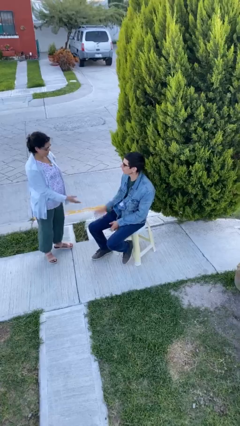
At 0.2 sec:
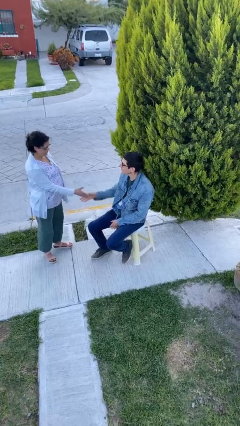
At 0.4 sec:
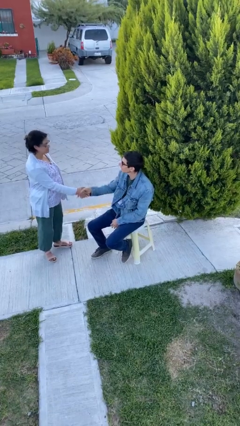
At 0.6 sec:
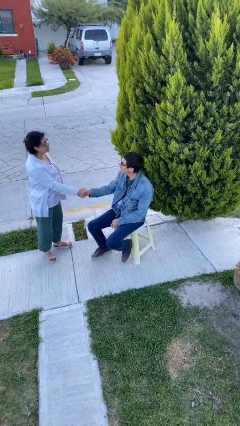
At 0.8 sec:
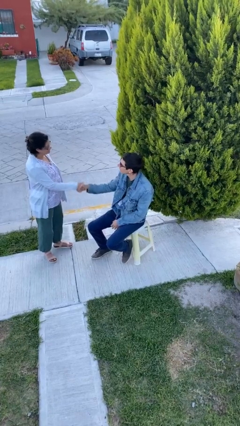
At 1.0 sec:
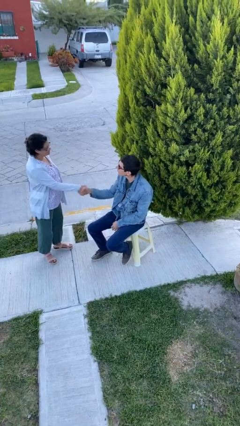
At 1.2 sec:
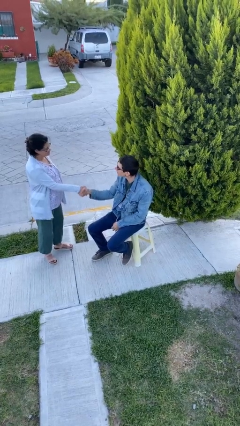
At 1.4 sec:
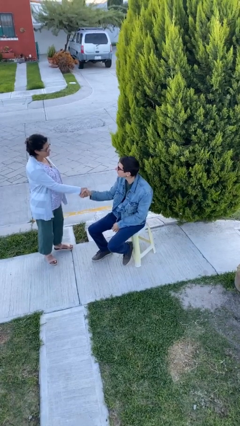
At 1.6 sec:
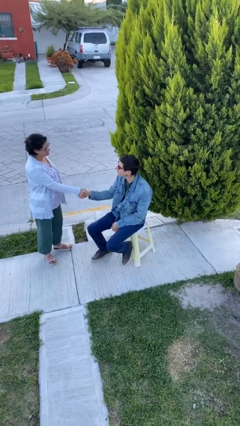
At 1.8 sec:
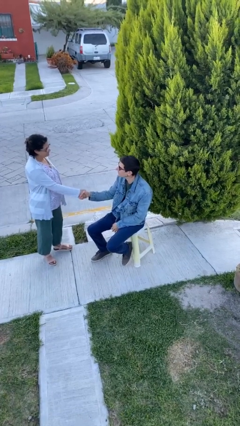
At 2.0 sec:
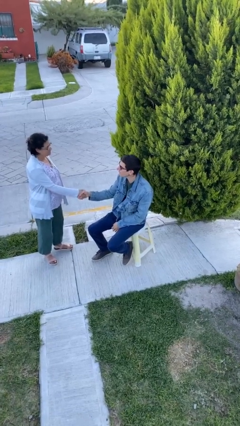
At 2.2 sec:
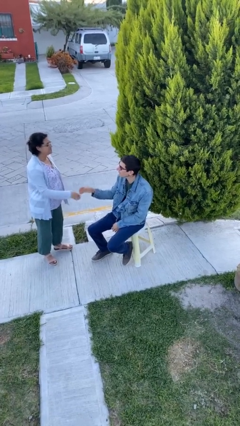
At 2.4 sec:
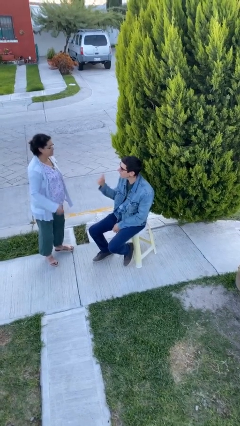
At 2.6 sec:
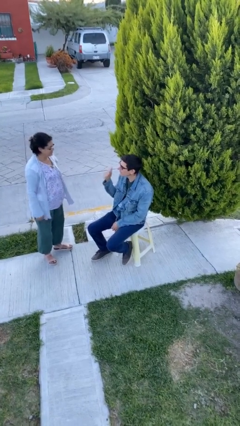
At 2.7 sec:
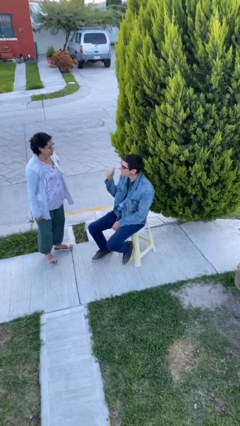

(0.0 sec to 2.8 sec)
person shakes hand

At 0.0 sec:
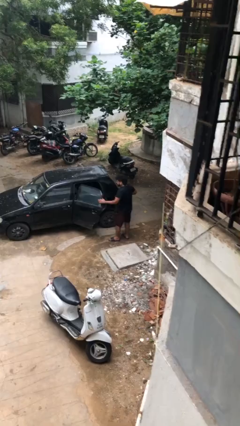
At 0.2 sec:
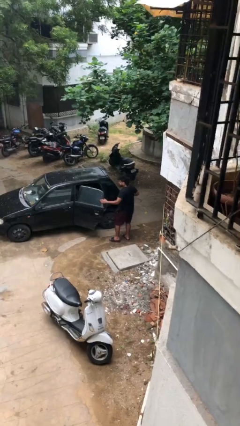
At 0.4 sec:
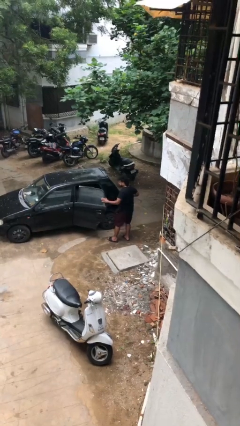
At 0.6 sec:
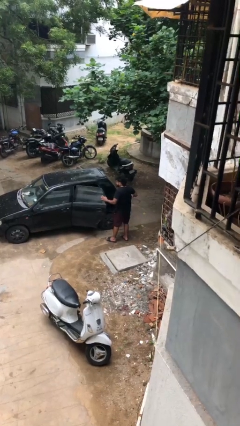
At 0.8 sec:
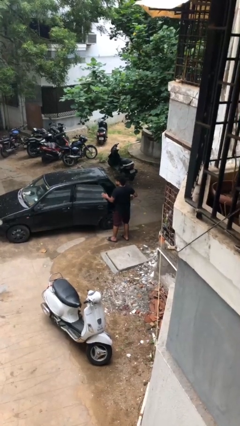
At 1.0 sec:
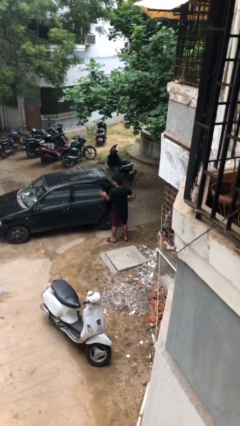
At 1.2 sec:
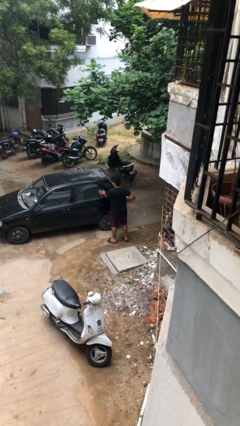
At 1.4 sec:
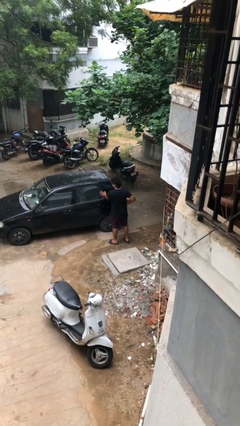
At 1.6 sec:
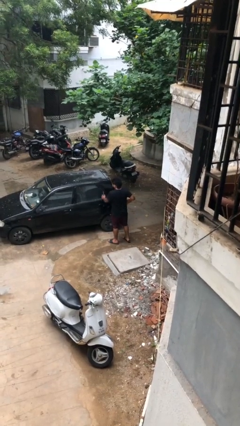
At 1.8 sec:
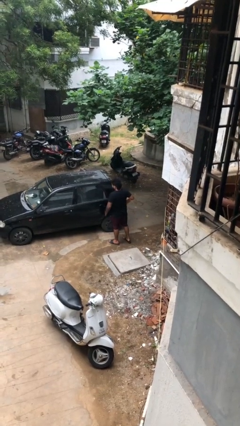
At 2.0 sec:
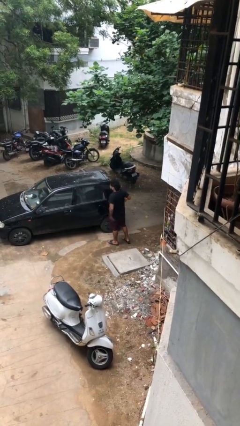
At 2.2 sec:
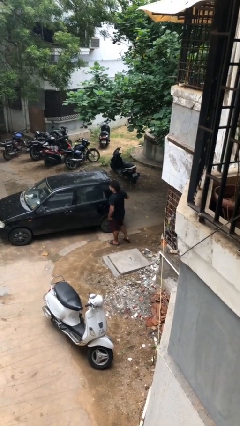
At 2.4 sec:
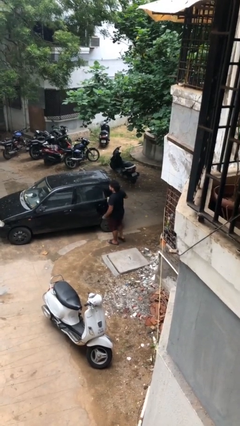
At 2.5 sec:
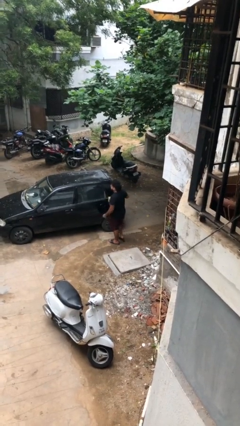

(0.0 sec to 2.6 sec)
person closes car door

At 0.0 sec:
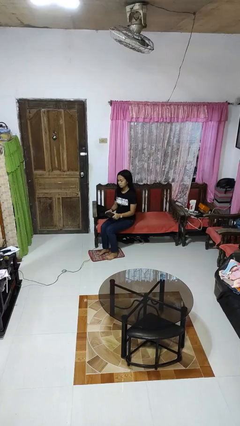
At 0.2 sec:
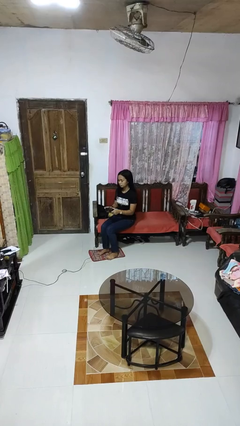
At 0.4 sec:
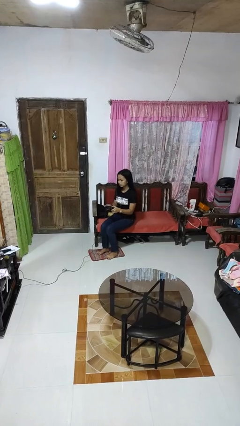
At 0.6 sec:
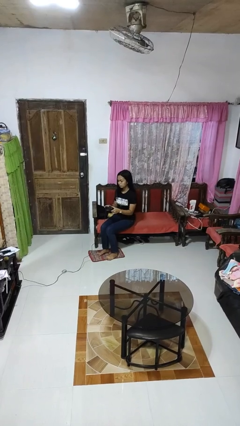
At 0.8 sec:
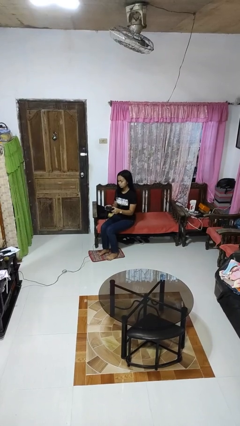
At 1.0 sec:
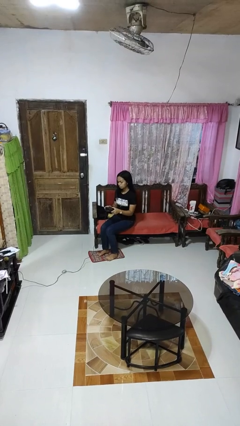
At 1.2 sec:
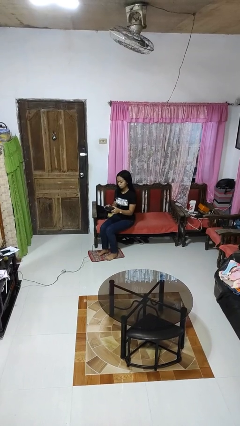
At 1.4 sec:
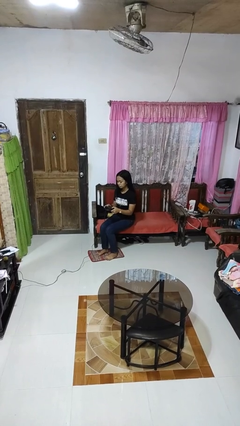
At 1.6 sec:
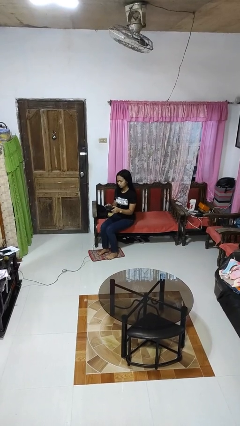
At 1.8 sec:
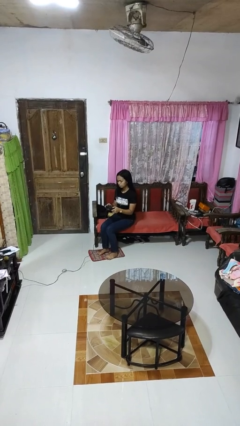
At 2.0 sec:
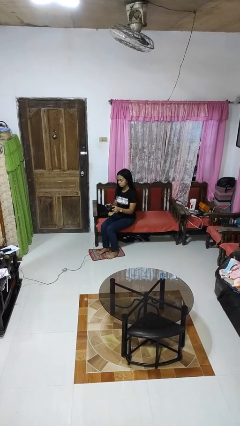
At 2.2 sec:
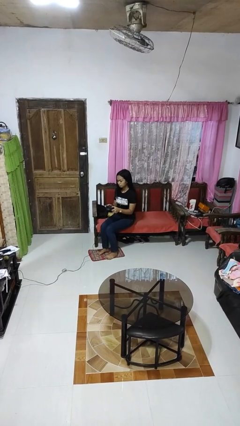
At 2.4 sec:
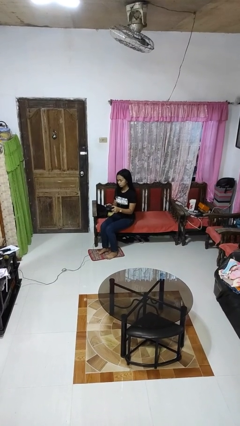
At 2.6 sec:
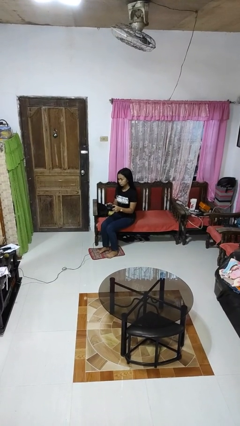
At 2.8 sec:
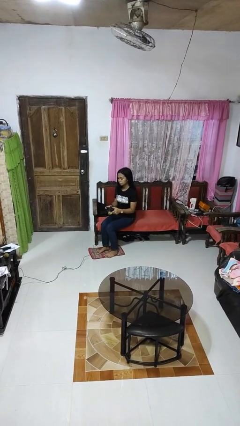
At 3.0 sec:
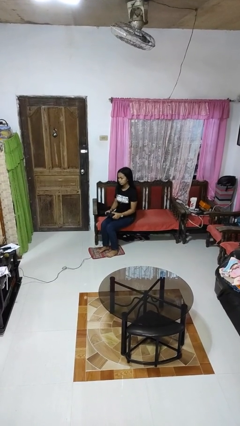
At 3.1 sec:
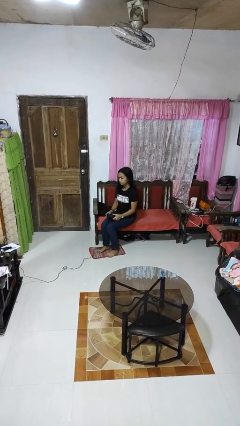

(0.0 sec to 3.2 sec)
person interacts with handheld game

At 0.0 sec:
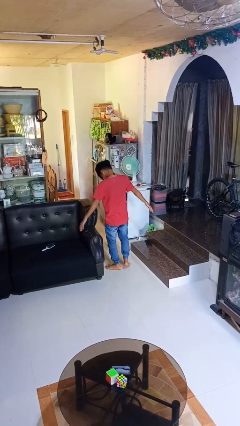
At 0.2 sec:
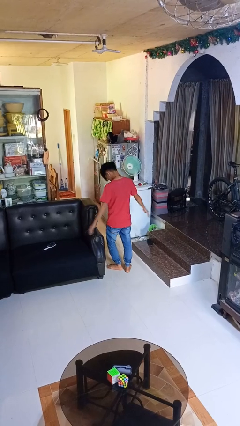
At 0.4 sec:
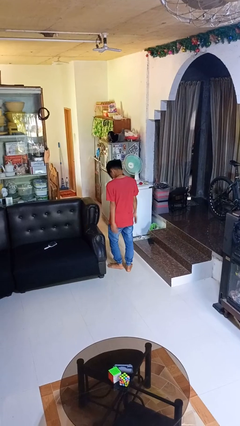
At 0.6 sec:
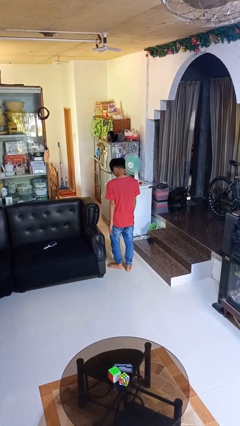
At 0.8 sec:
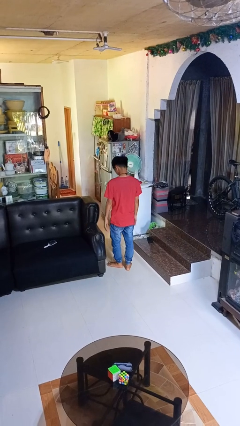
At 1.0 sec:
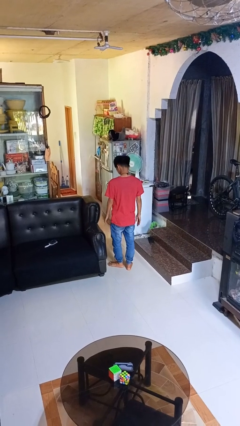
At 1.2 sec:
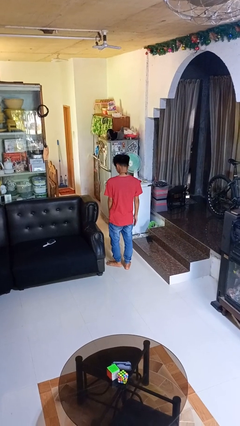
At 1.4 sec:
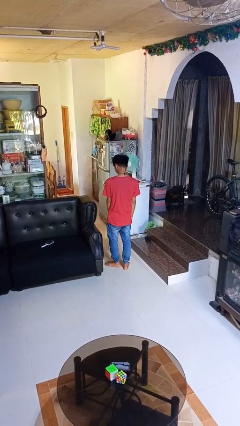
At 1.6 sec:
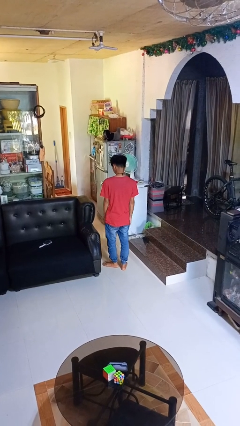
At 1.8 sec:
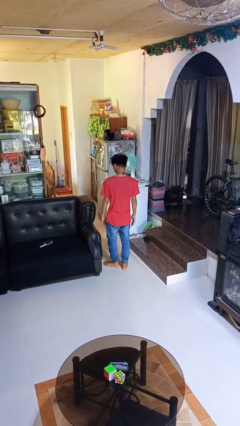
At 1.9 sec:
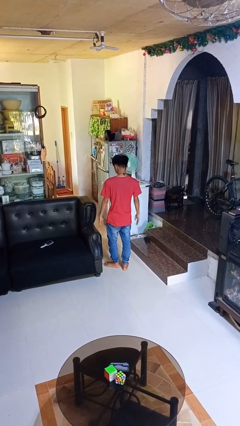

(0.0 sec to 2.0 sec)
person throws object into air

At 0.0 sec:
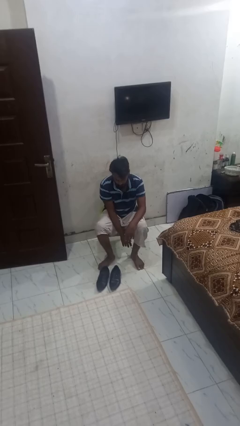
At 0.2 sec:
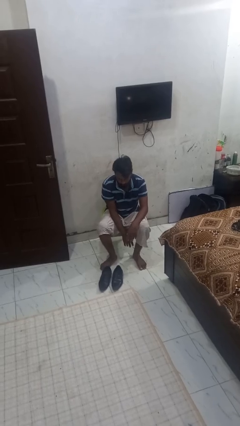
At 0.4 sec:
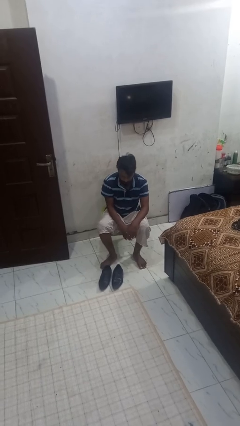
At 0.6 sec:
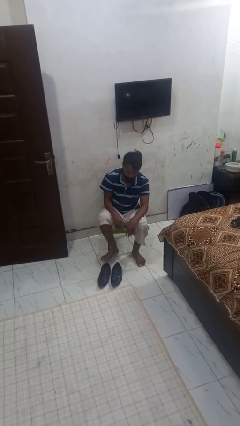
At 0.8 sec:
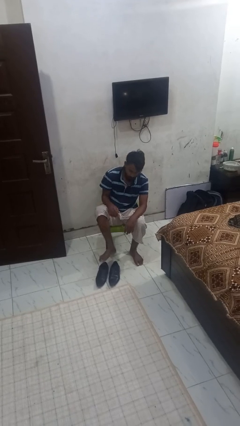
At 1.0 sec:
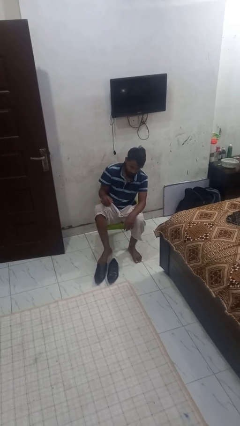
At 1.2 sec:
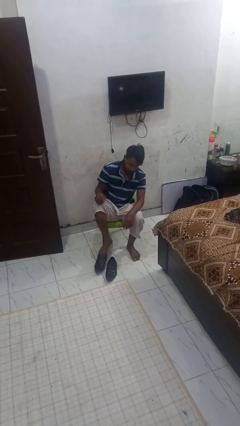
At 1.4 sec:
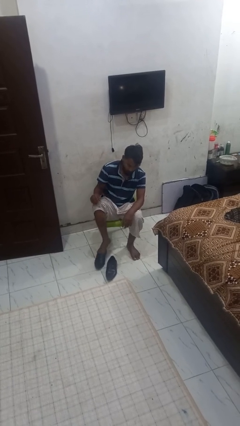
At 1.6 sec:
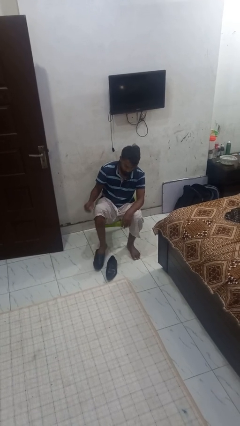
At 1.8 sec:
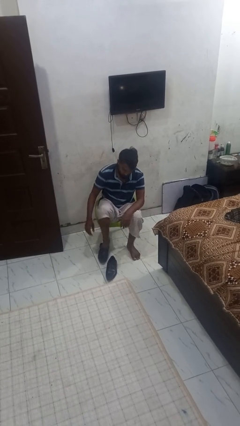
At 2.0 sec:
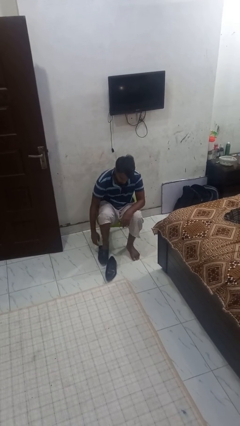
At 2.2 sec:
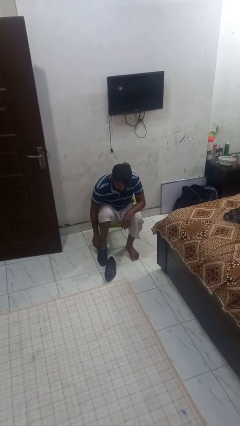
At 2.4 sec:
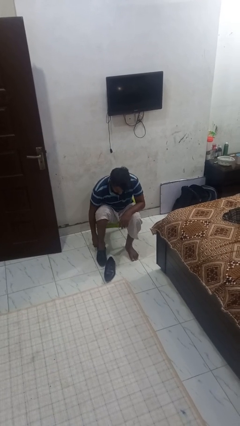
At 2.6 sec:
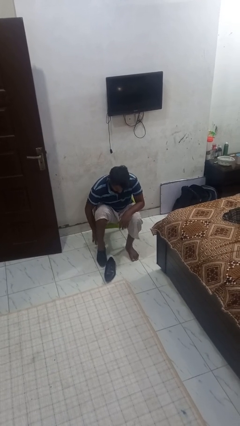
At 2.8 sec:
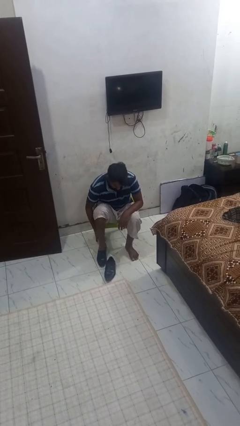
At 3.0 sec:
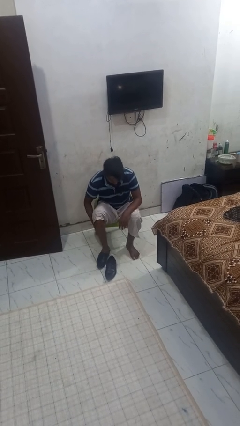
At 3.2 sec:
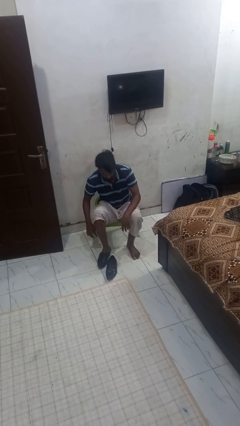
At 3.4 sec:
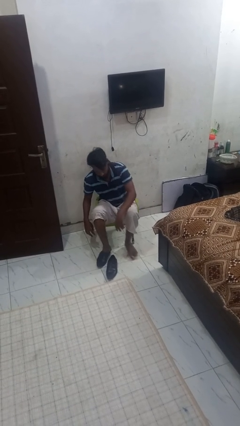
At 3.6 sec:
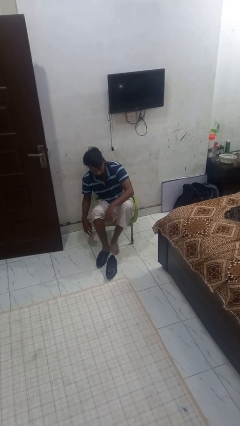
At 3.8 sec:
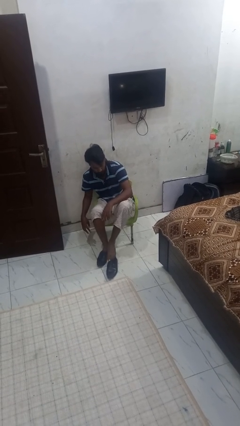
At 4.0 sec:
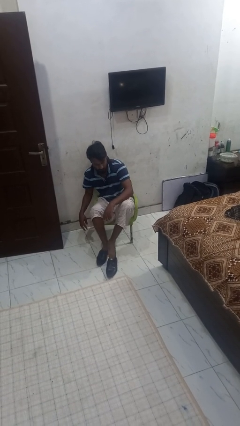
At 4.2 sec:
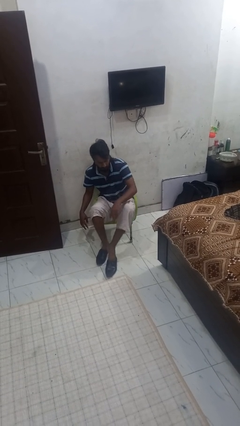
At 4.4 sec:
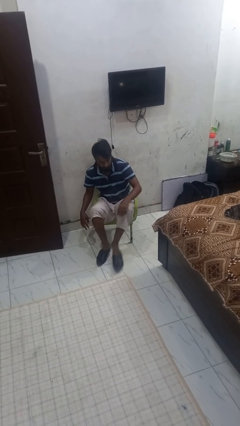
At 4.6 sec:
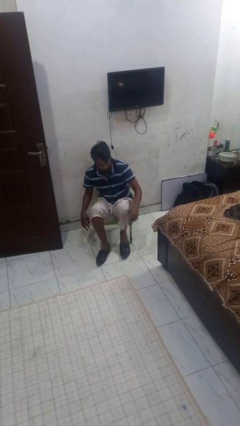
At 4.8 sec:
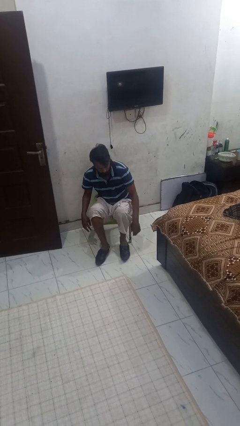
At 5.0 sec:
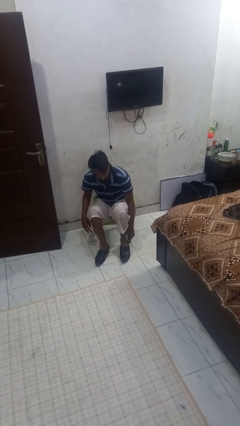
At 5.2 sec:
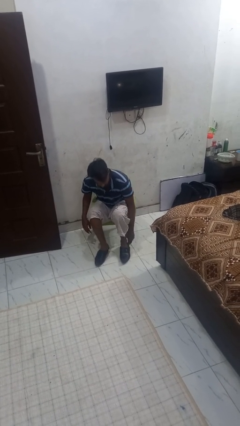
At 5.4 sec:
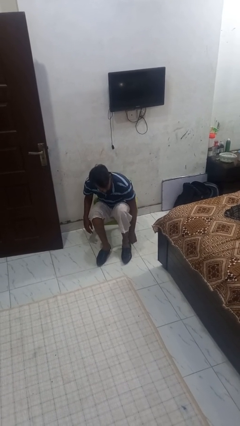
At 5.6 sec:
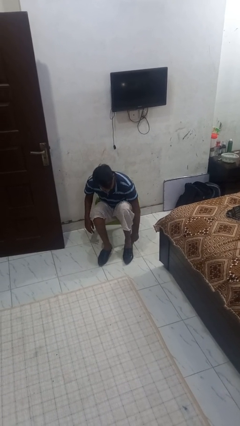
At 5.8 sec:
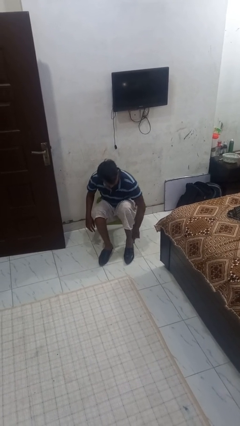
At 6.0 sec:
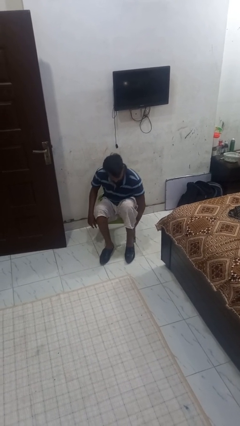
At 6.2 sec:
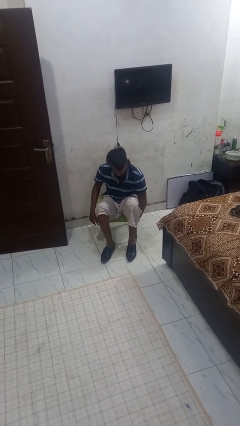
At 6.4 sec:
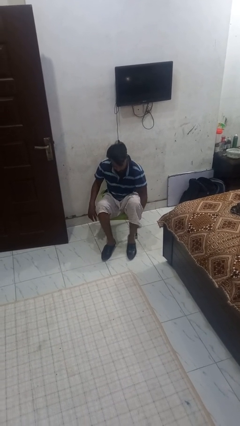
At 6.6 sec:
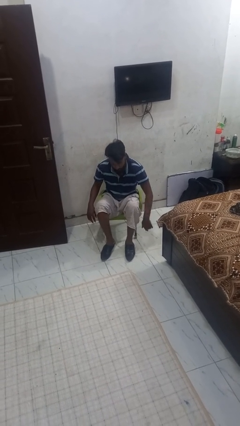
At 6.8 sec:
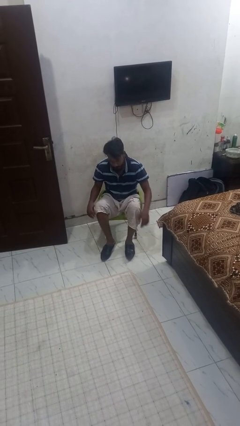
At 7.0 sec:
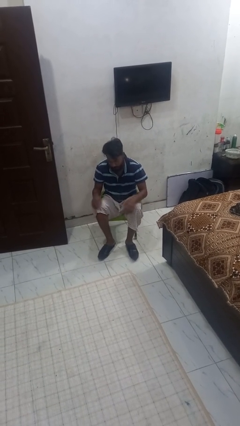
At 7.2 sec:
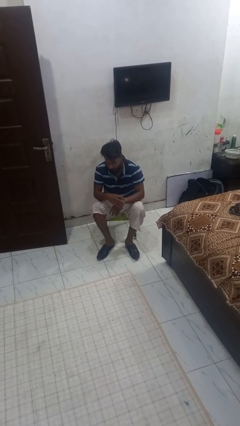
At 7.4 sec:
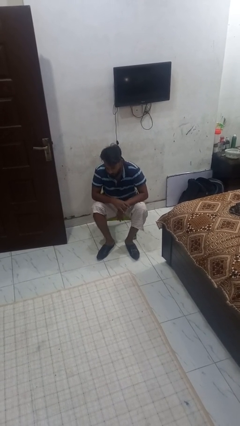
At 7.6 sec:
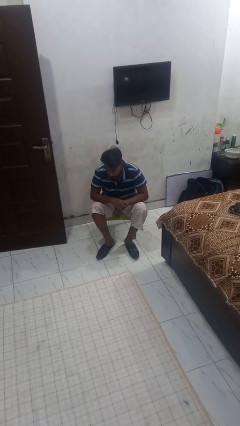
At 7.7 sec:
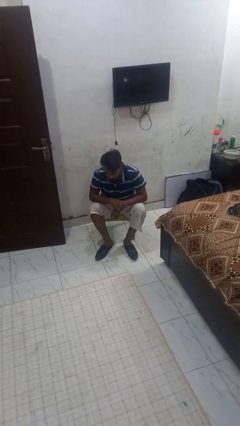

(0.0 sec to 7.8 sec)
person puts on shoes
